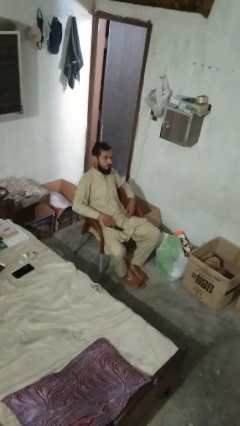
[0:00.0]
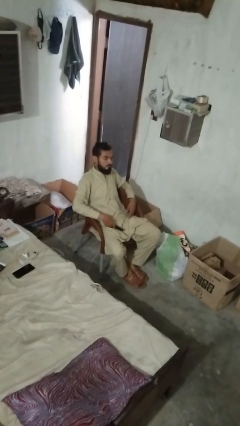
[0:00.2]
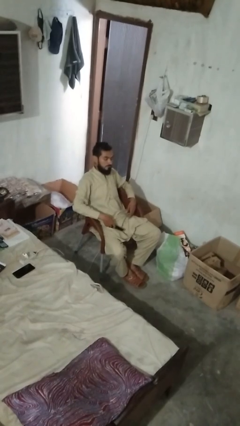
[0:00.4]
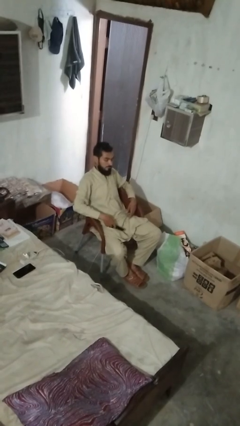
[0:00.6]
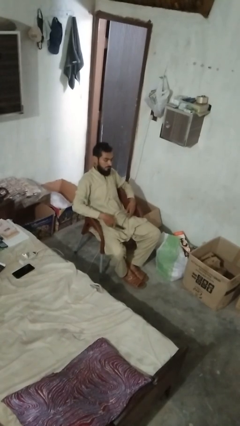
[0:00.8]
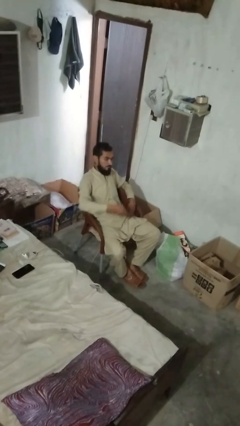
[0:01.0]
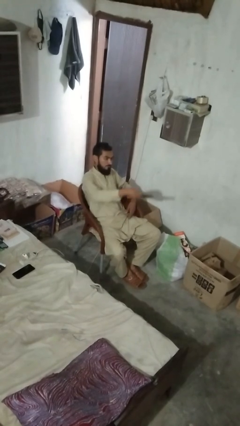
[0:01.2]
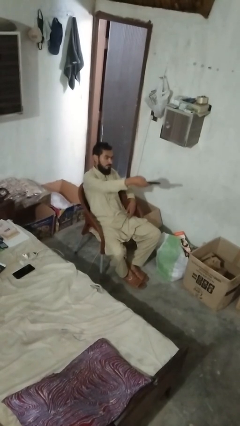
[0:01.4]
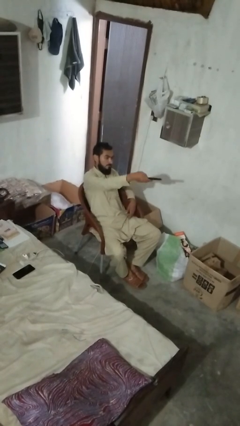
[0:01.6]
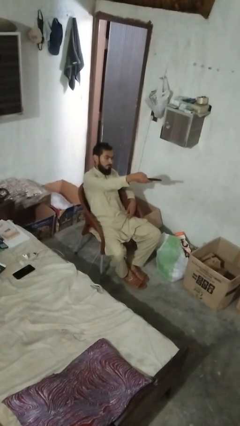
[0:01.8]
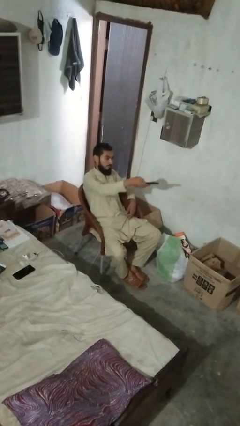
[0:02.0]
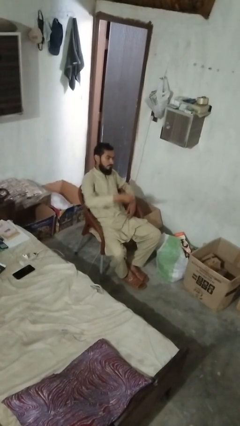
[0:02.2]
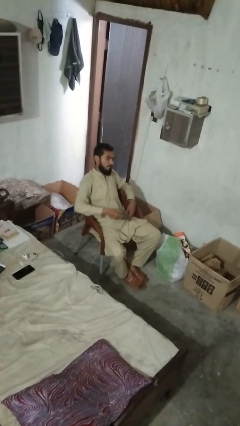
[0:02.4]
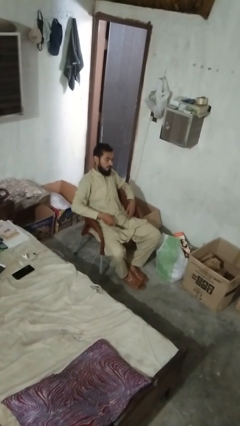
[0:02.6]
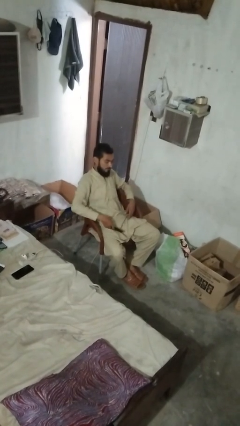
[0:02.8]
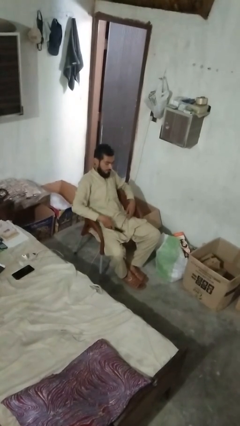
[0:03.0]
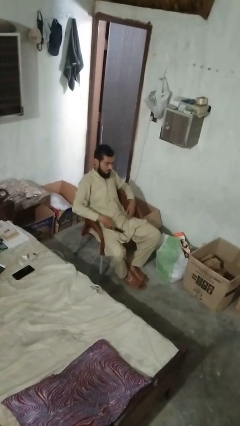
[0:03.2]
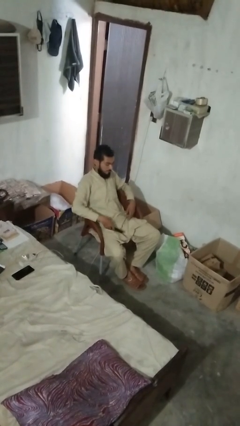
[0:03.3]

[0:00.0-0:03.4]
person uses television remote

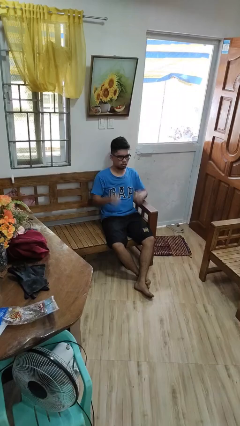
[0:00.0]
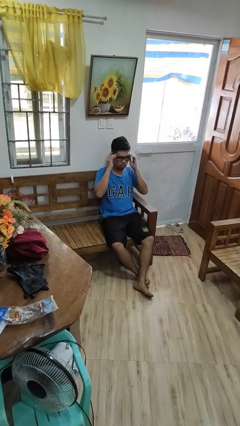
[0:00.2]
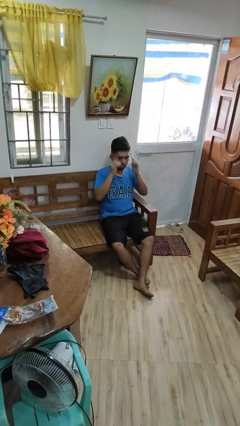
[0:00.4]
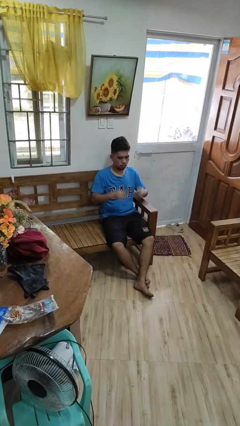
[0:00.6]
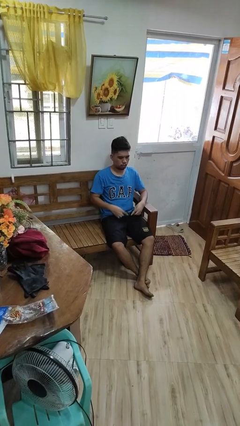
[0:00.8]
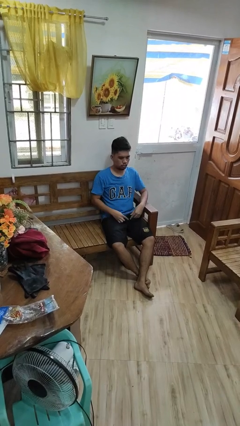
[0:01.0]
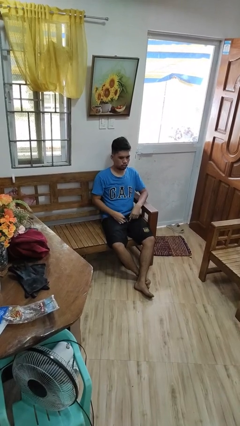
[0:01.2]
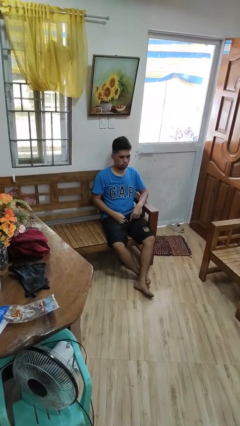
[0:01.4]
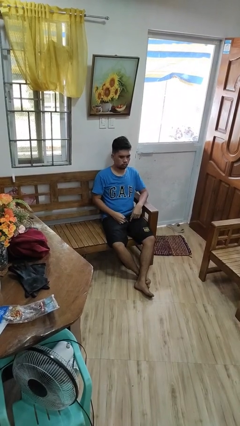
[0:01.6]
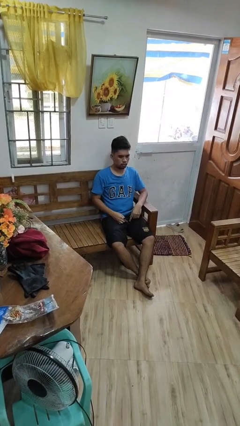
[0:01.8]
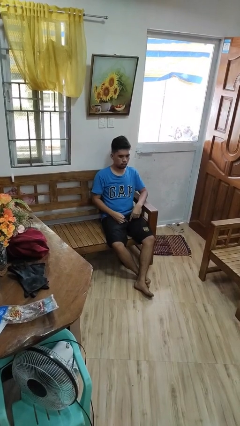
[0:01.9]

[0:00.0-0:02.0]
person takes off glasses

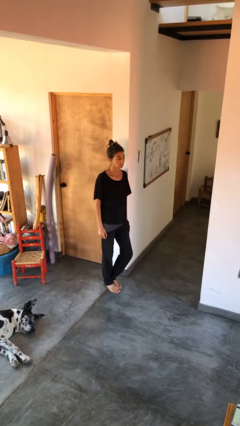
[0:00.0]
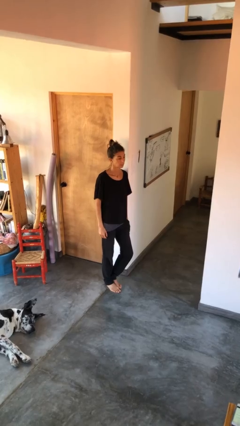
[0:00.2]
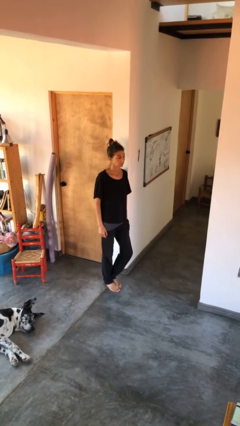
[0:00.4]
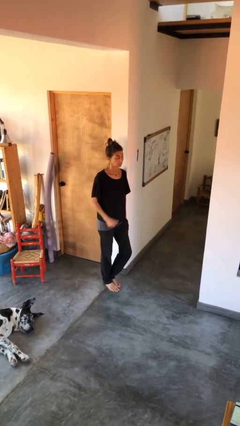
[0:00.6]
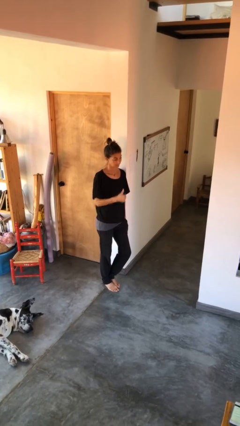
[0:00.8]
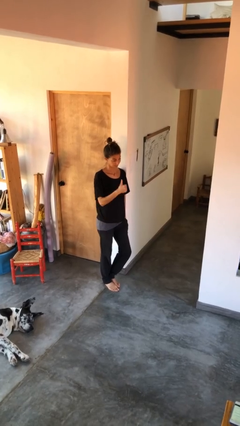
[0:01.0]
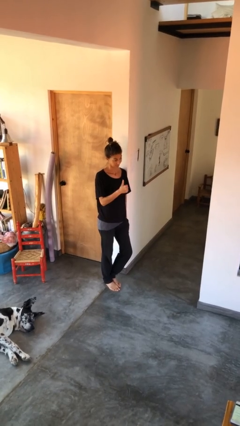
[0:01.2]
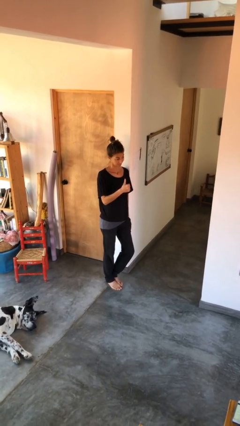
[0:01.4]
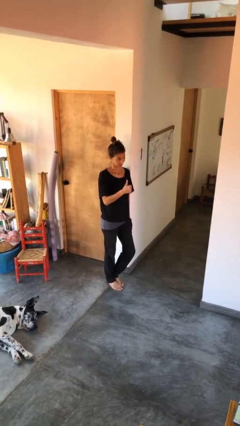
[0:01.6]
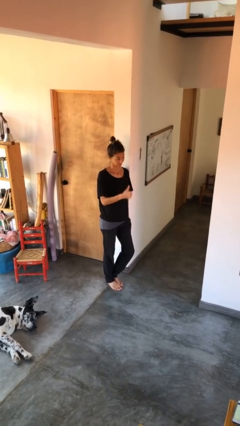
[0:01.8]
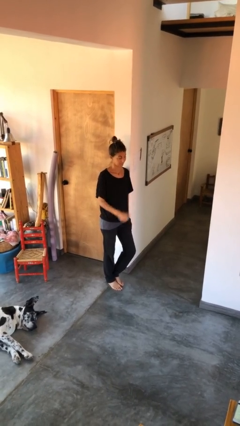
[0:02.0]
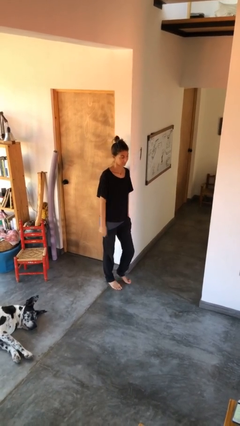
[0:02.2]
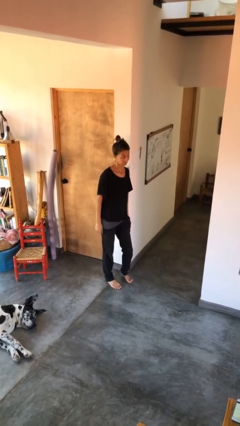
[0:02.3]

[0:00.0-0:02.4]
person gestures thumbs up

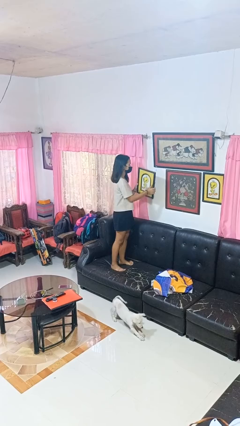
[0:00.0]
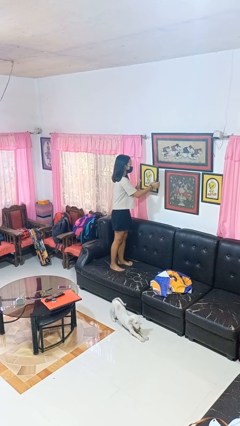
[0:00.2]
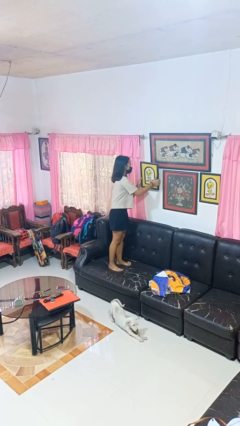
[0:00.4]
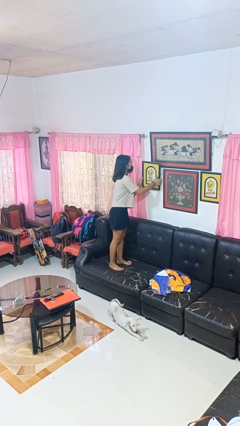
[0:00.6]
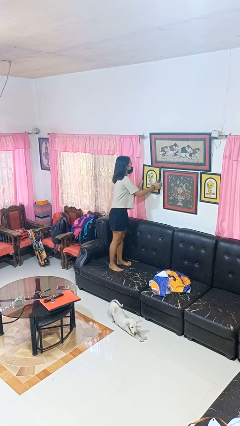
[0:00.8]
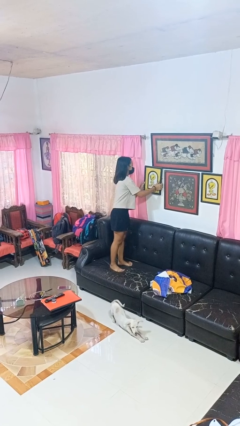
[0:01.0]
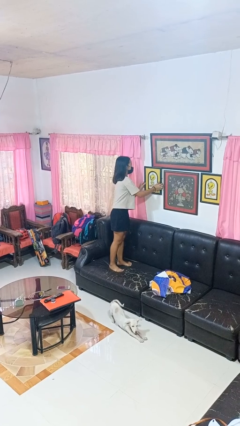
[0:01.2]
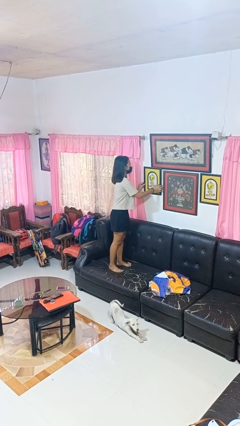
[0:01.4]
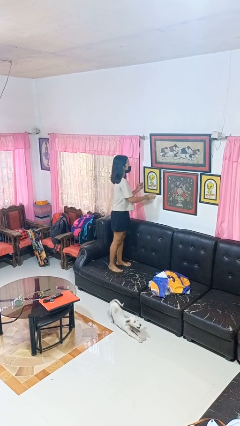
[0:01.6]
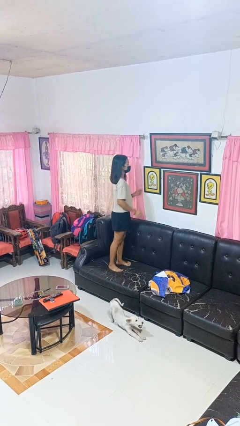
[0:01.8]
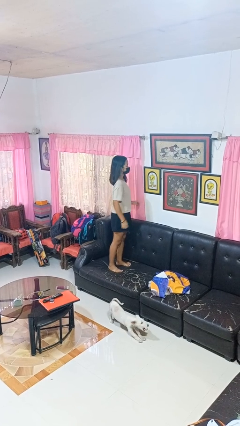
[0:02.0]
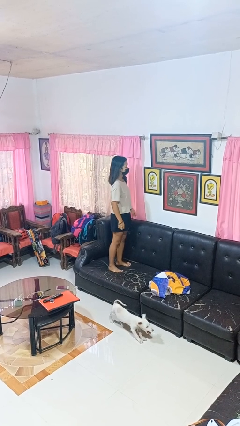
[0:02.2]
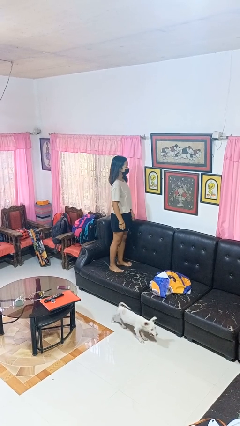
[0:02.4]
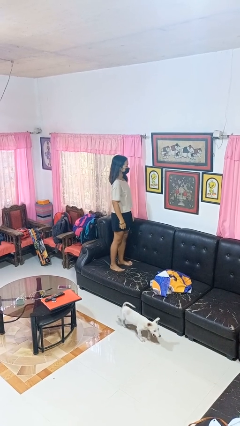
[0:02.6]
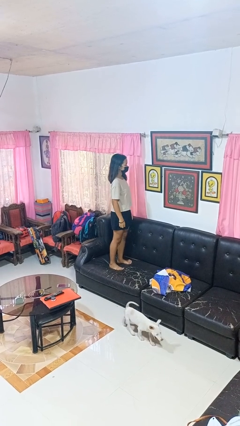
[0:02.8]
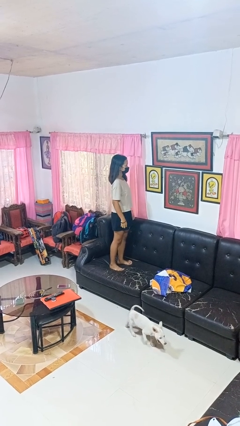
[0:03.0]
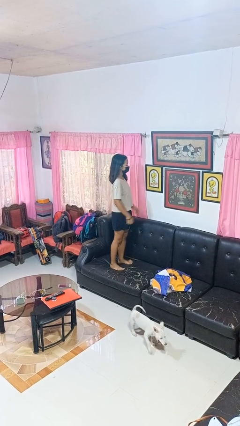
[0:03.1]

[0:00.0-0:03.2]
person puts up picture frame

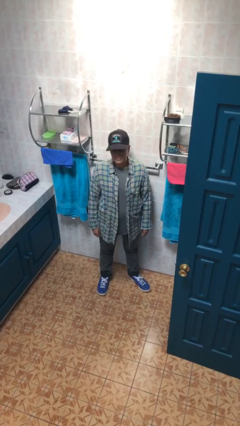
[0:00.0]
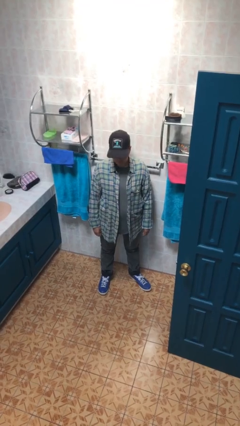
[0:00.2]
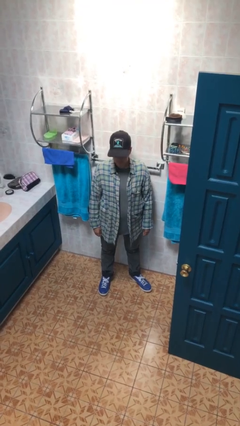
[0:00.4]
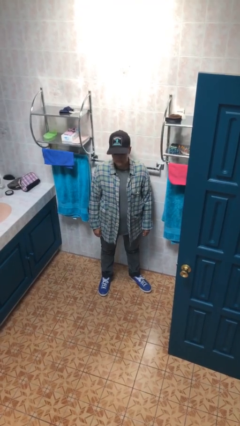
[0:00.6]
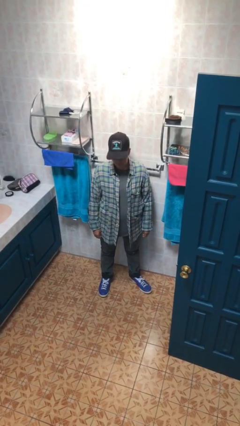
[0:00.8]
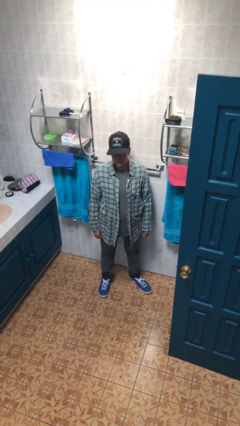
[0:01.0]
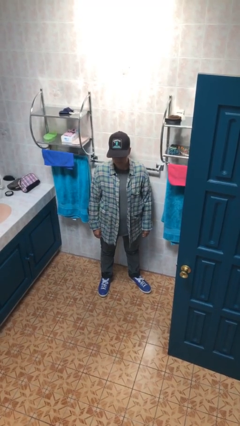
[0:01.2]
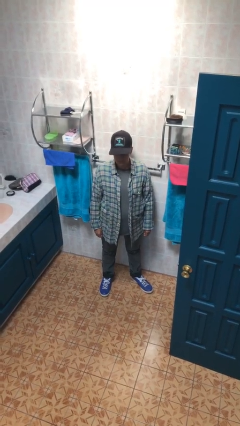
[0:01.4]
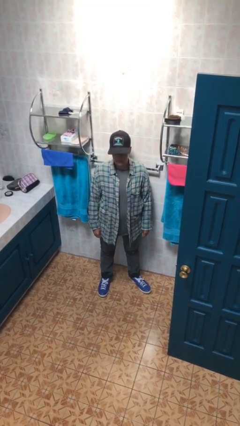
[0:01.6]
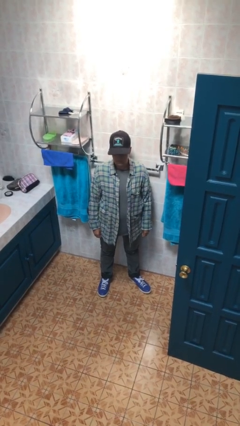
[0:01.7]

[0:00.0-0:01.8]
person nods head

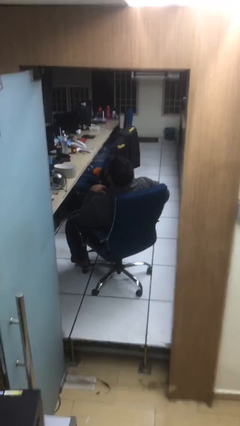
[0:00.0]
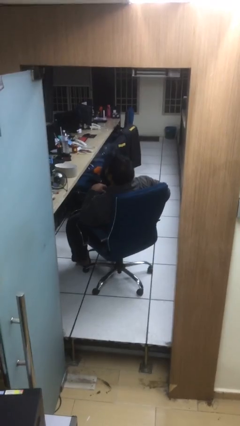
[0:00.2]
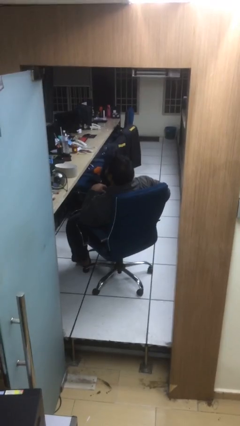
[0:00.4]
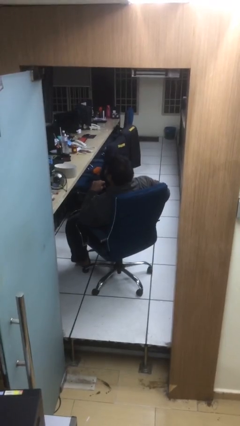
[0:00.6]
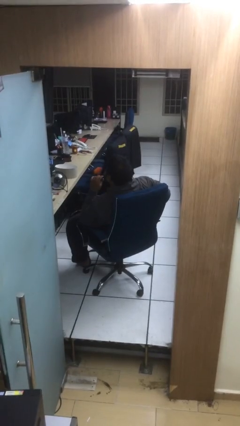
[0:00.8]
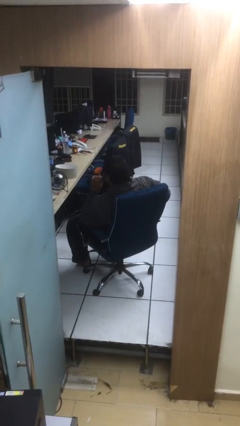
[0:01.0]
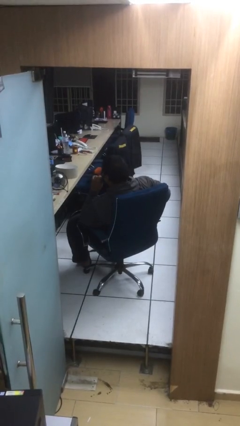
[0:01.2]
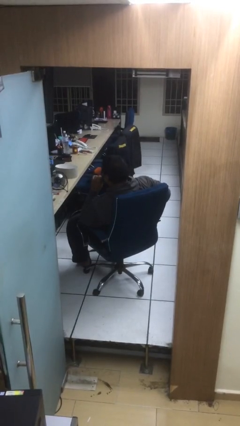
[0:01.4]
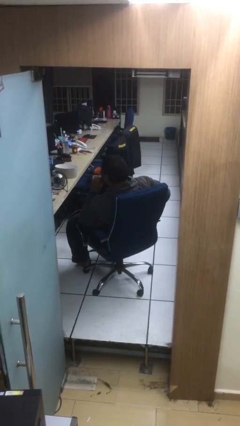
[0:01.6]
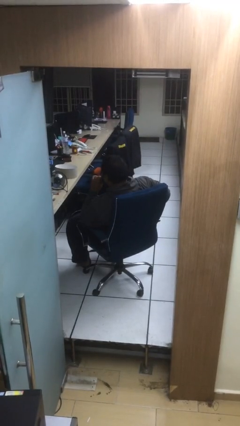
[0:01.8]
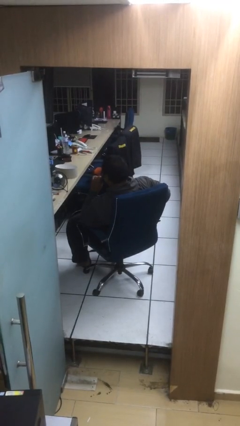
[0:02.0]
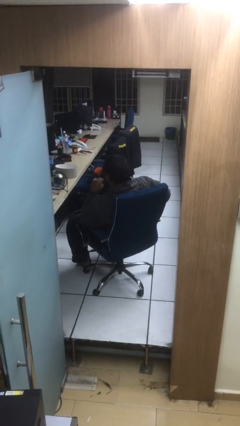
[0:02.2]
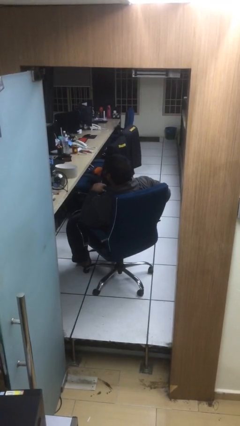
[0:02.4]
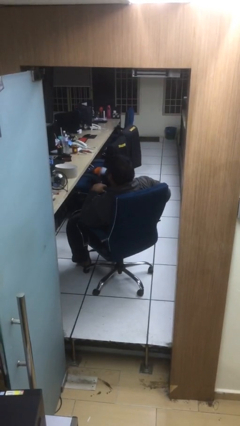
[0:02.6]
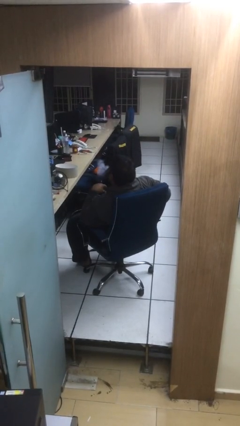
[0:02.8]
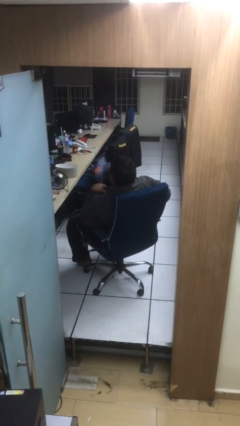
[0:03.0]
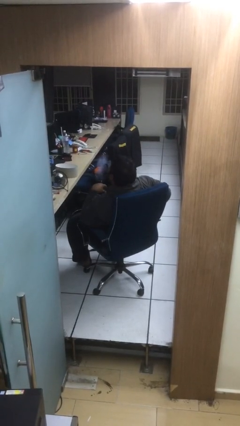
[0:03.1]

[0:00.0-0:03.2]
person vapes

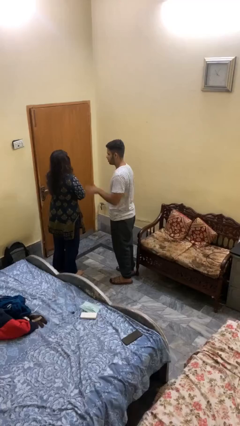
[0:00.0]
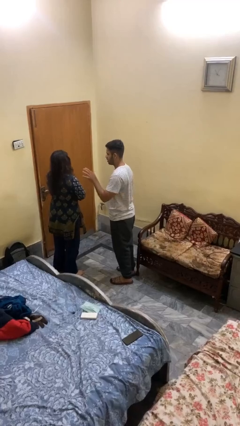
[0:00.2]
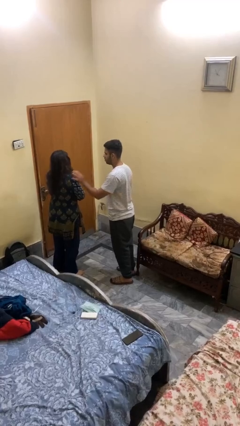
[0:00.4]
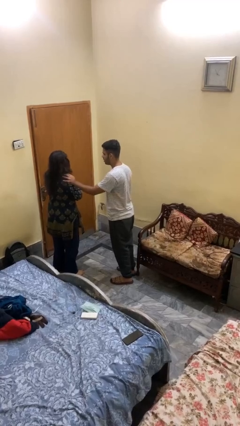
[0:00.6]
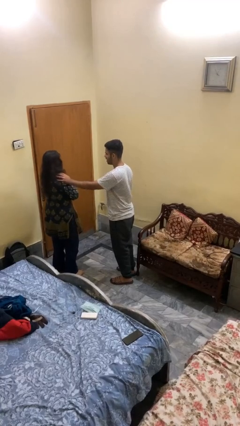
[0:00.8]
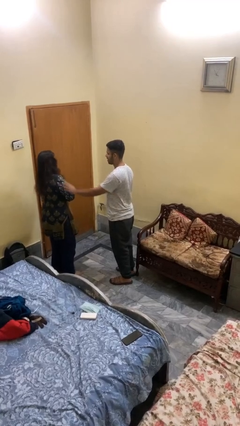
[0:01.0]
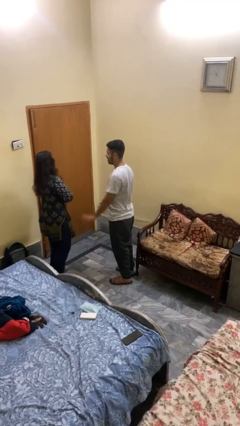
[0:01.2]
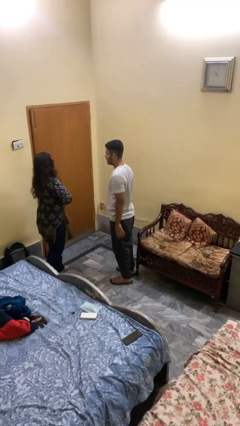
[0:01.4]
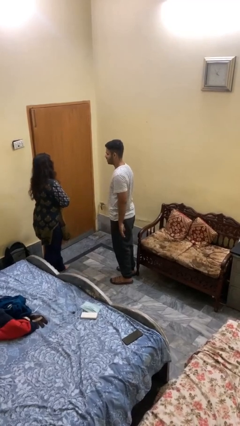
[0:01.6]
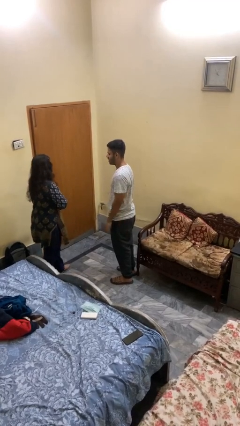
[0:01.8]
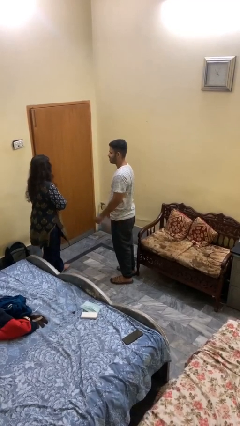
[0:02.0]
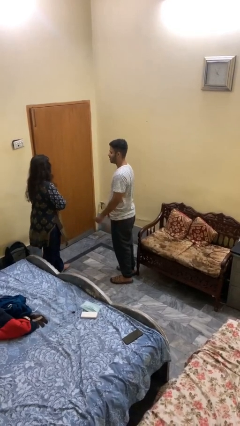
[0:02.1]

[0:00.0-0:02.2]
person shoves person
